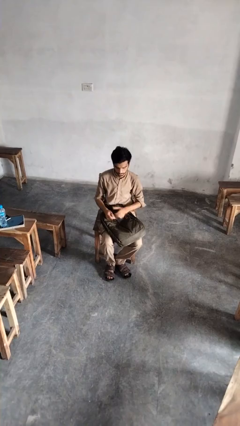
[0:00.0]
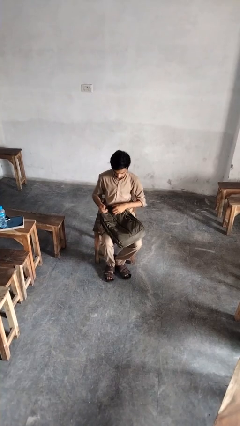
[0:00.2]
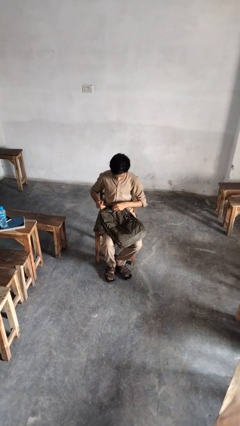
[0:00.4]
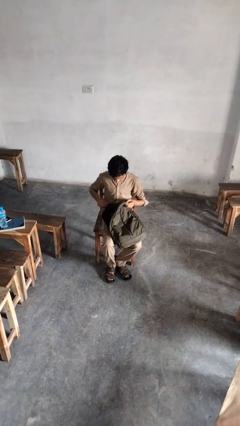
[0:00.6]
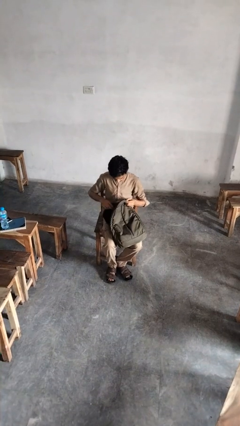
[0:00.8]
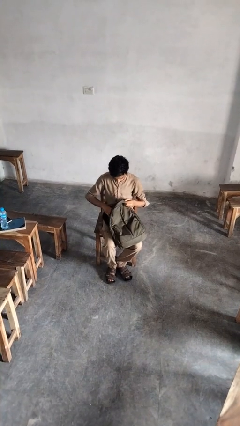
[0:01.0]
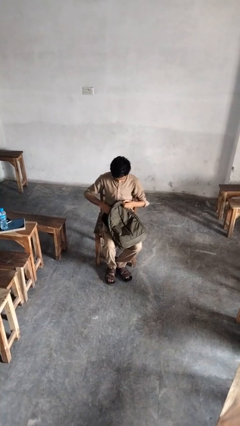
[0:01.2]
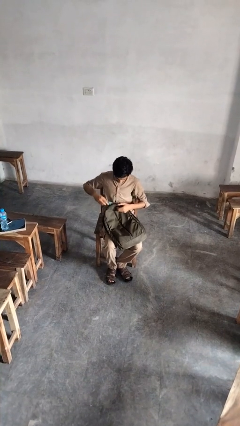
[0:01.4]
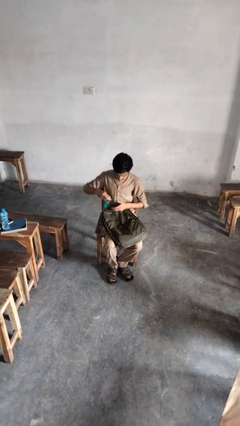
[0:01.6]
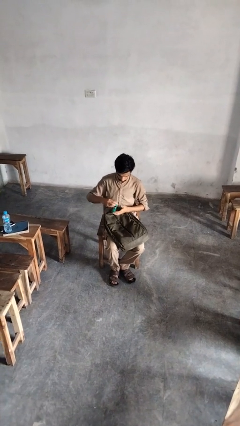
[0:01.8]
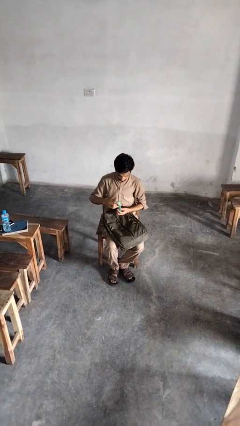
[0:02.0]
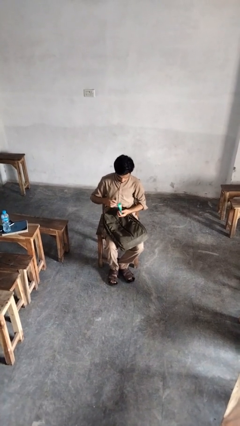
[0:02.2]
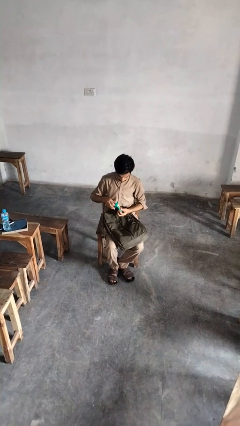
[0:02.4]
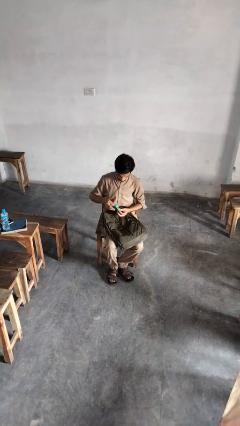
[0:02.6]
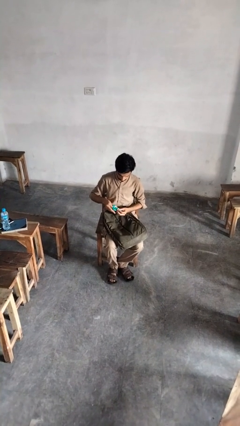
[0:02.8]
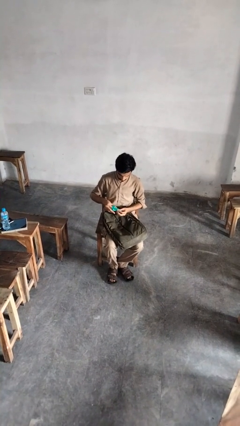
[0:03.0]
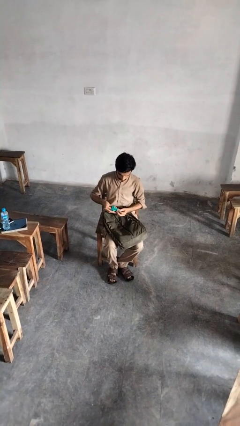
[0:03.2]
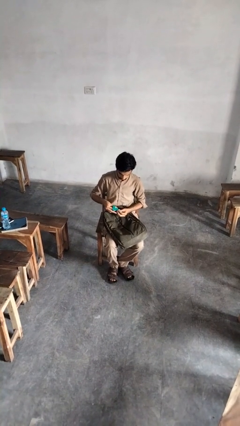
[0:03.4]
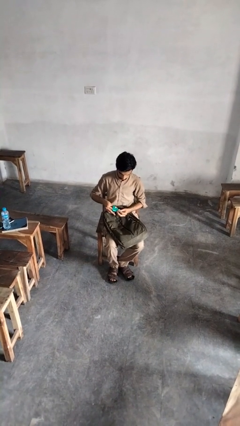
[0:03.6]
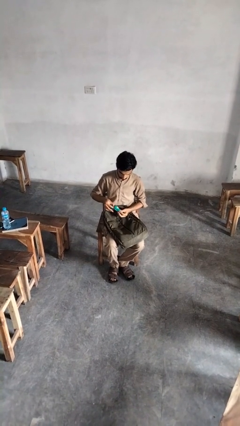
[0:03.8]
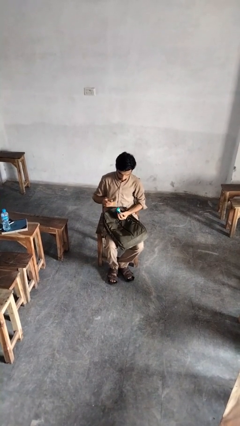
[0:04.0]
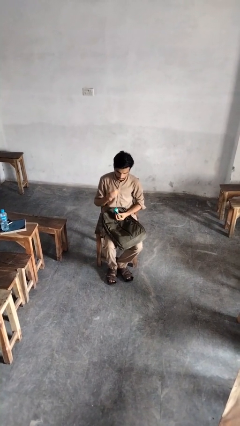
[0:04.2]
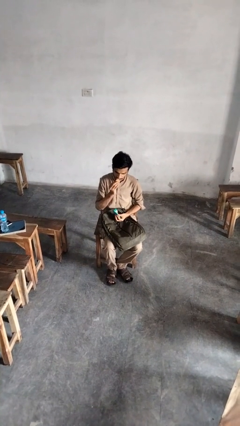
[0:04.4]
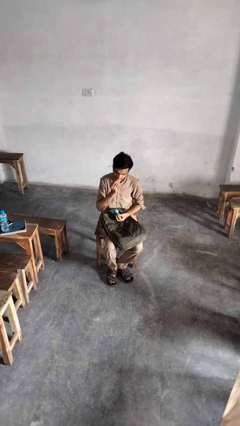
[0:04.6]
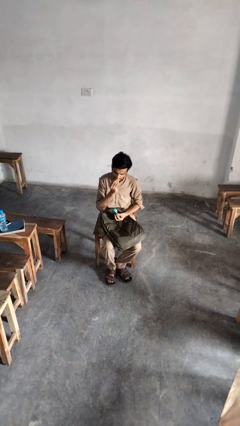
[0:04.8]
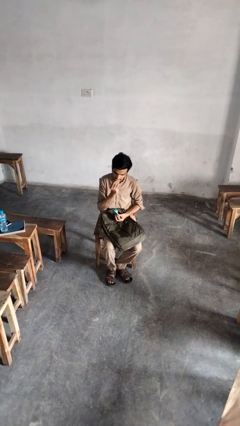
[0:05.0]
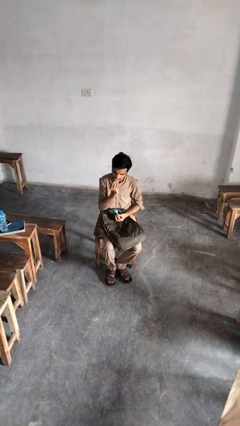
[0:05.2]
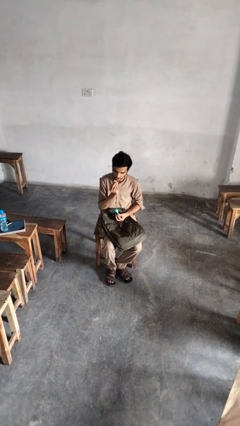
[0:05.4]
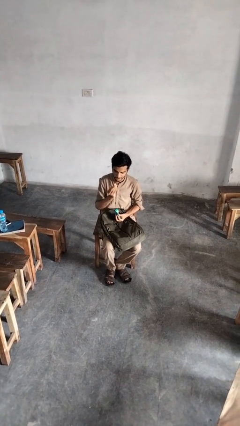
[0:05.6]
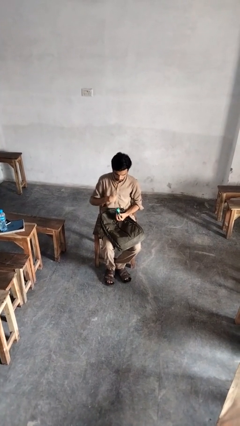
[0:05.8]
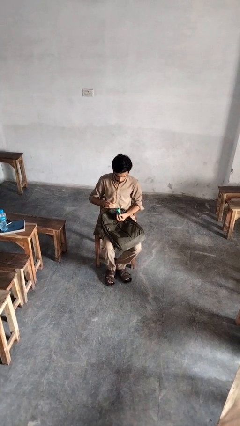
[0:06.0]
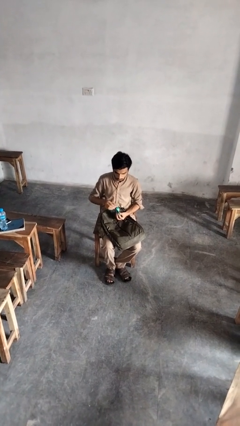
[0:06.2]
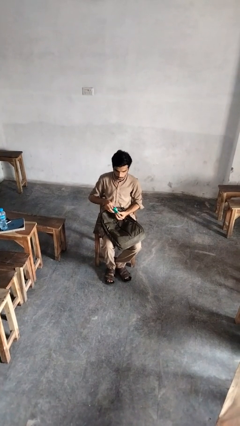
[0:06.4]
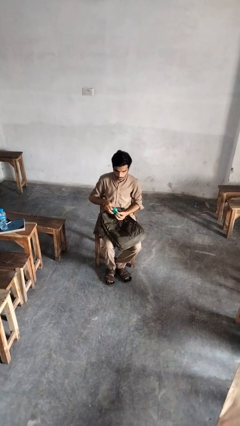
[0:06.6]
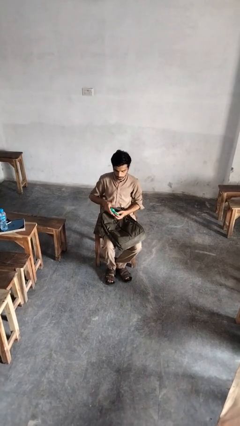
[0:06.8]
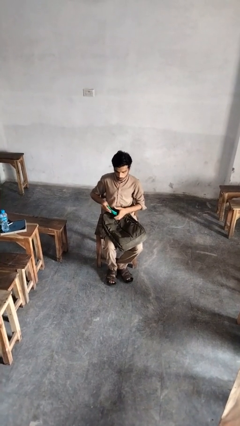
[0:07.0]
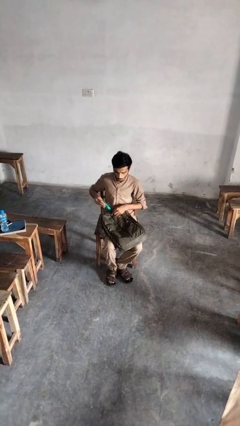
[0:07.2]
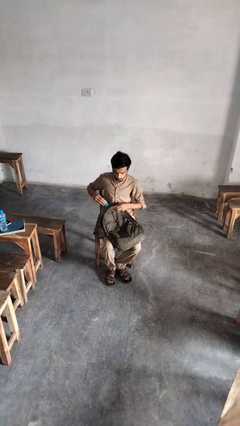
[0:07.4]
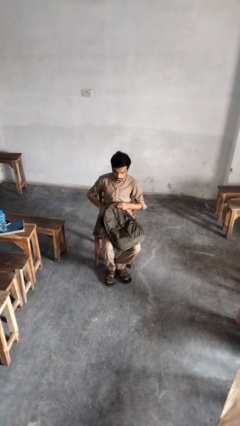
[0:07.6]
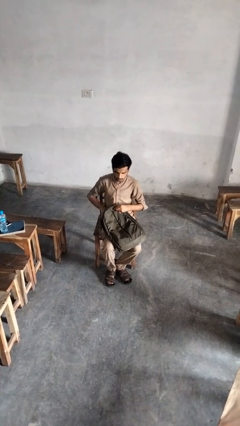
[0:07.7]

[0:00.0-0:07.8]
person eats snack from bag

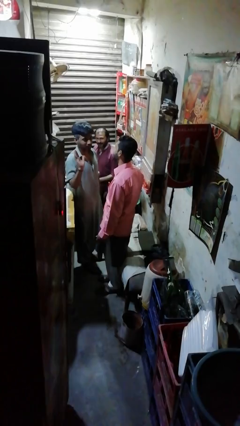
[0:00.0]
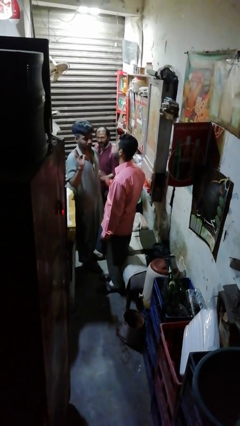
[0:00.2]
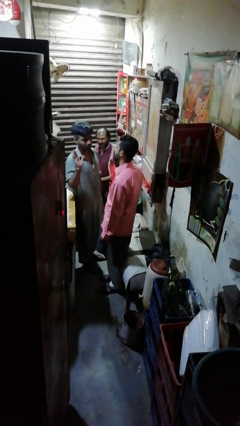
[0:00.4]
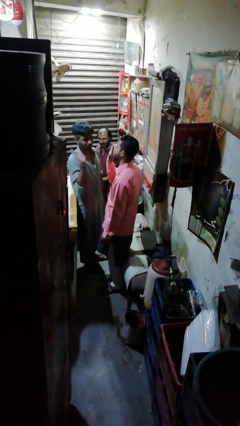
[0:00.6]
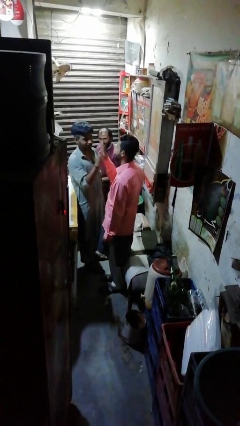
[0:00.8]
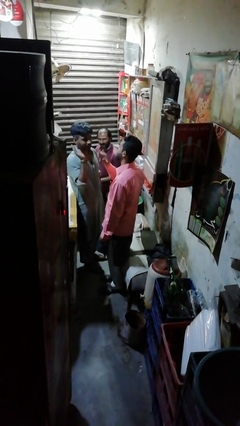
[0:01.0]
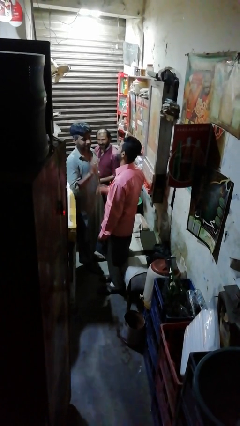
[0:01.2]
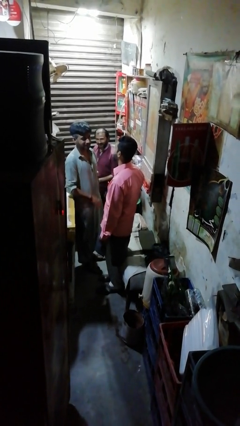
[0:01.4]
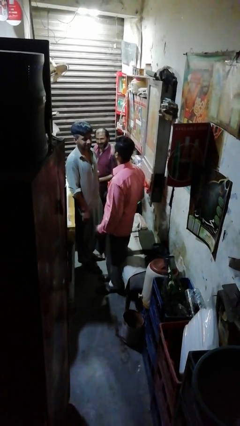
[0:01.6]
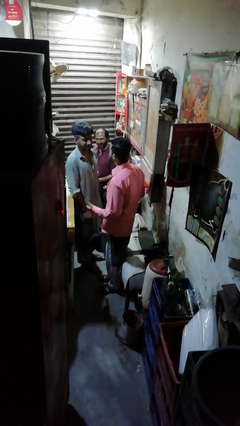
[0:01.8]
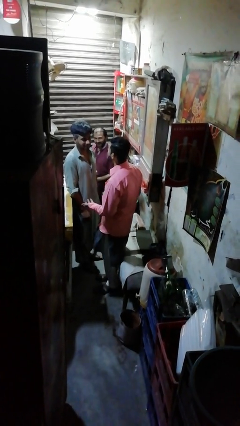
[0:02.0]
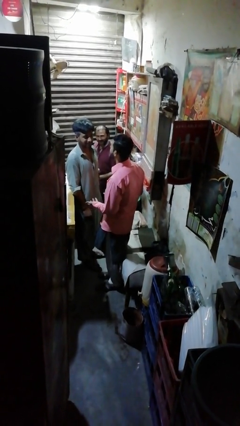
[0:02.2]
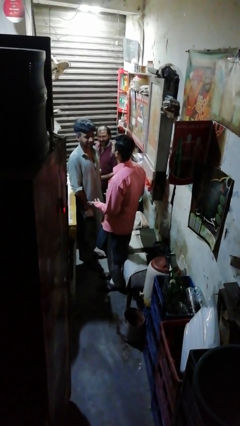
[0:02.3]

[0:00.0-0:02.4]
person highfives hand

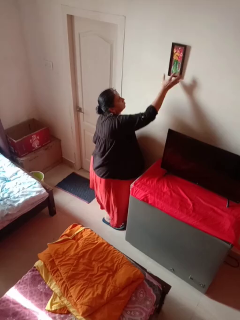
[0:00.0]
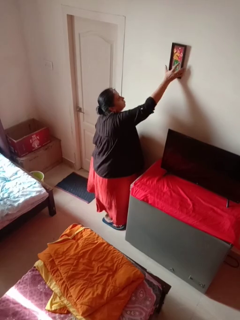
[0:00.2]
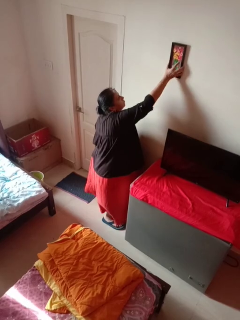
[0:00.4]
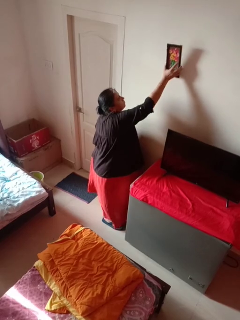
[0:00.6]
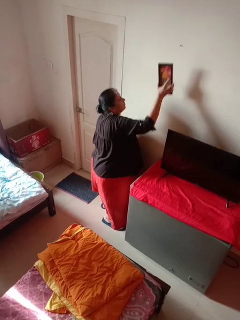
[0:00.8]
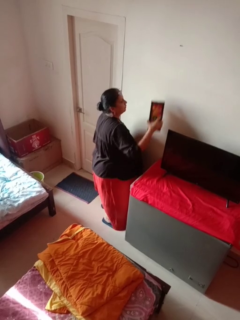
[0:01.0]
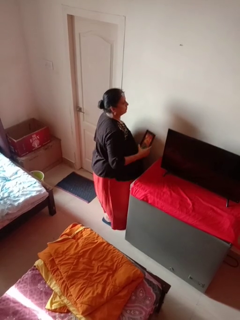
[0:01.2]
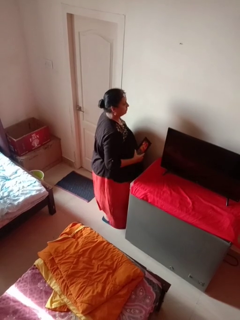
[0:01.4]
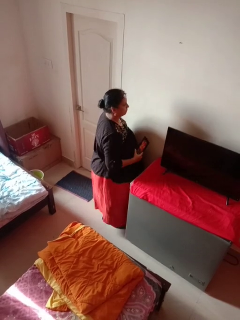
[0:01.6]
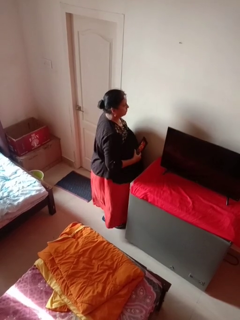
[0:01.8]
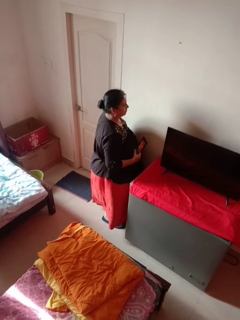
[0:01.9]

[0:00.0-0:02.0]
person takes down picture frame

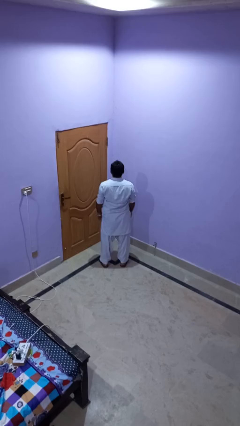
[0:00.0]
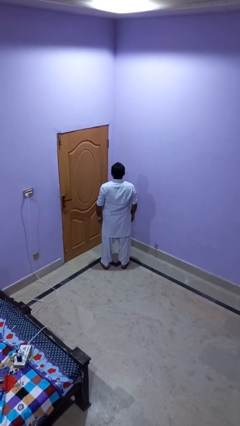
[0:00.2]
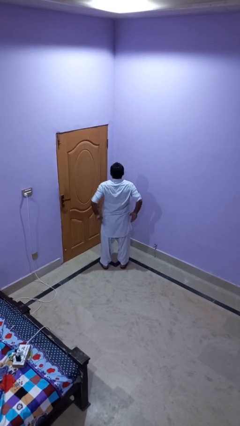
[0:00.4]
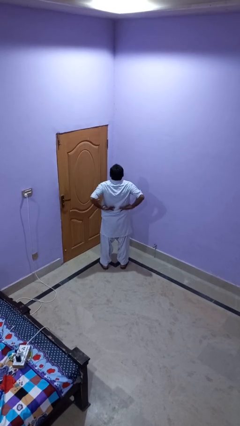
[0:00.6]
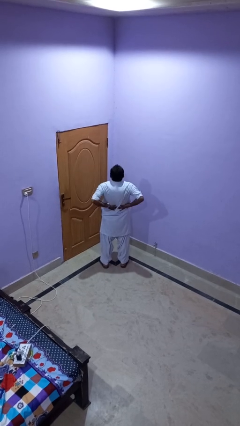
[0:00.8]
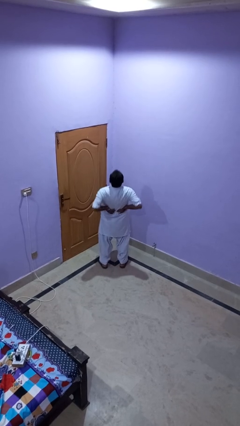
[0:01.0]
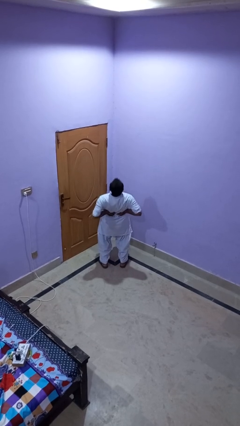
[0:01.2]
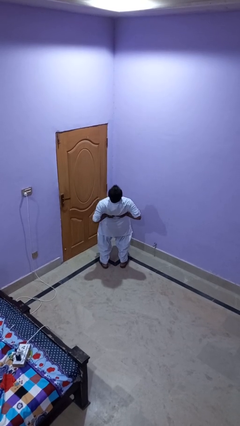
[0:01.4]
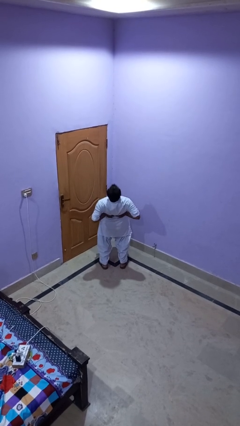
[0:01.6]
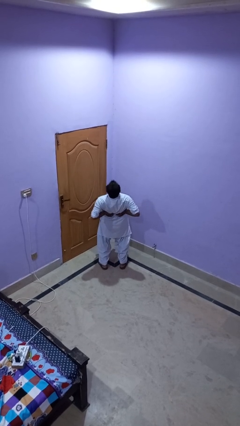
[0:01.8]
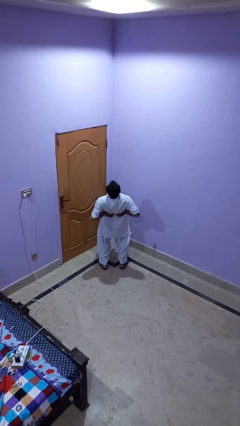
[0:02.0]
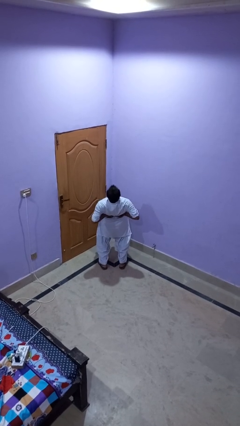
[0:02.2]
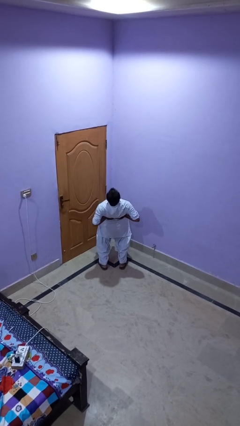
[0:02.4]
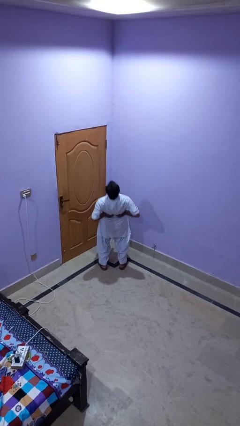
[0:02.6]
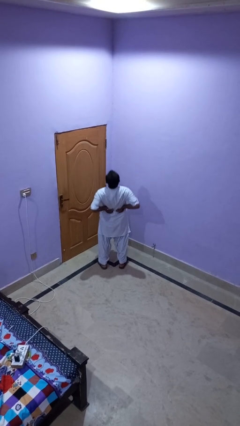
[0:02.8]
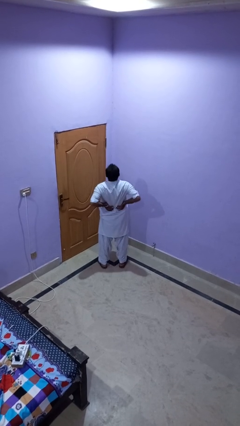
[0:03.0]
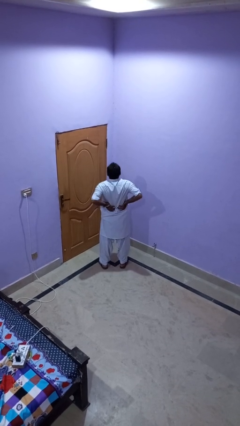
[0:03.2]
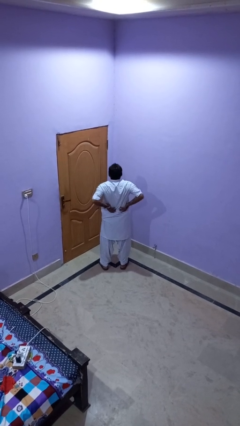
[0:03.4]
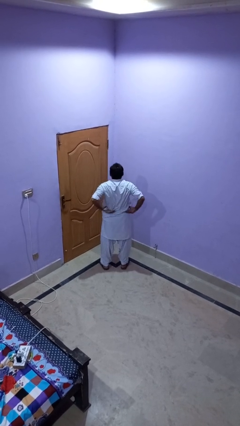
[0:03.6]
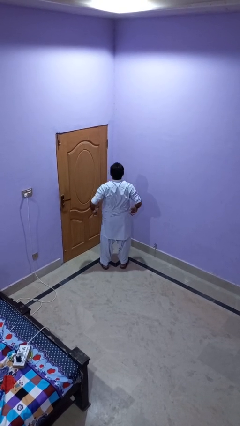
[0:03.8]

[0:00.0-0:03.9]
person stretches back

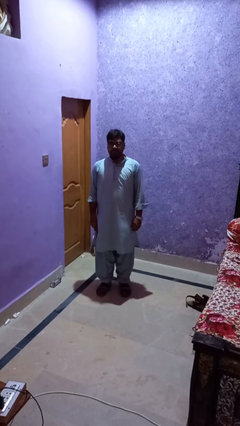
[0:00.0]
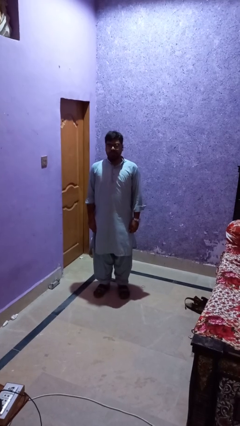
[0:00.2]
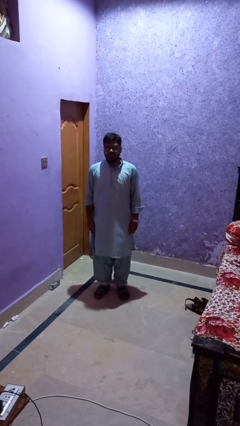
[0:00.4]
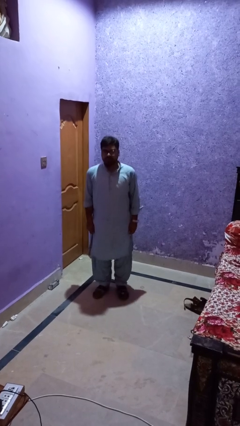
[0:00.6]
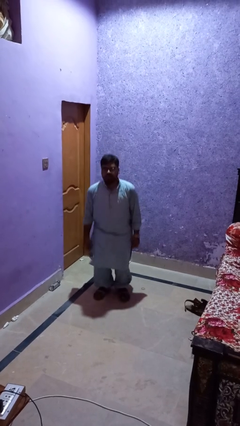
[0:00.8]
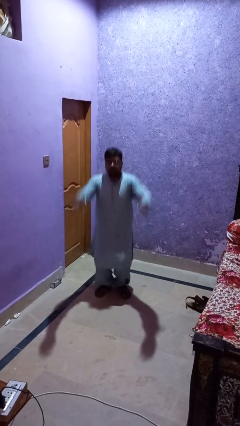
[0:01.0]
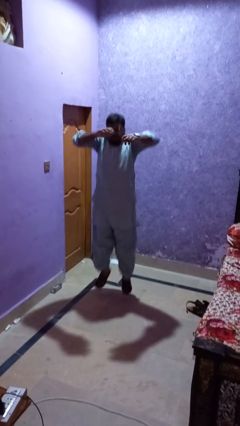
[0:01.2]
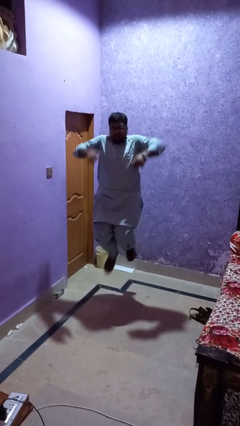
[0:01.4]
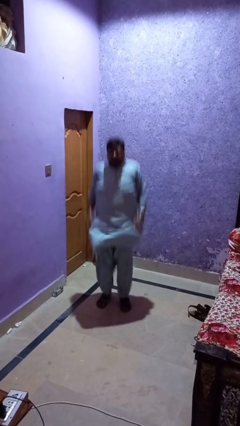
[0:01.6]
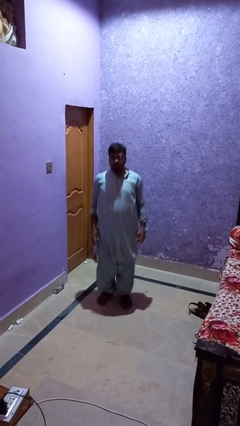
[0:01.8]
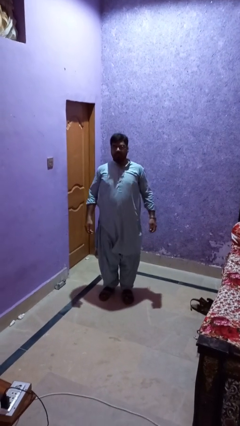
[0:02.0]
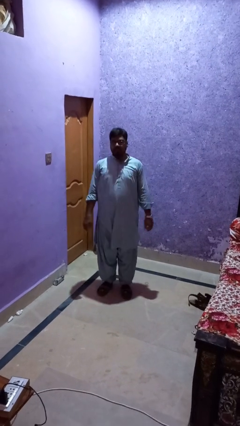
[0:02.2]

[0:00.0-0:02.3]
person jumps
